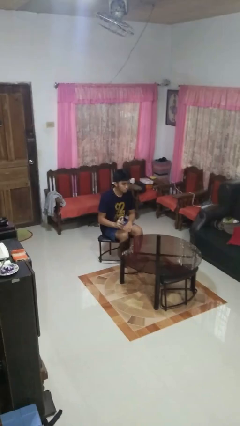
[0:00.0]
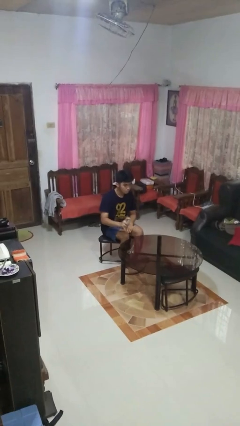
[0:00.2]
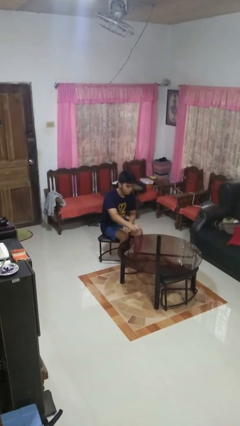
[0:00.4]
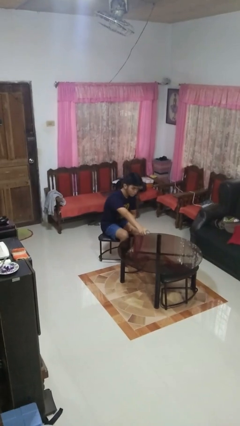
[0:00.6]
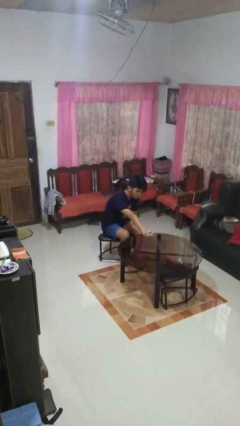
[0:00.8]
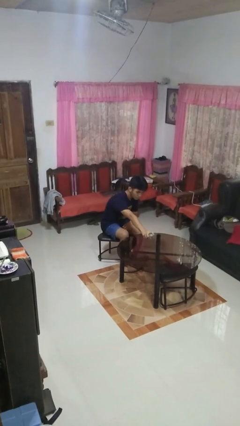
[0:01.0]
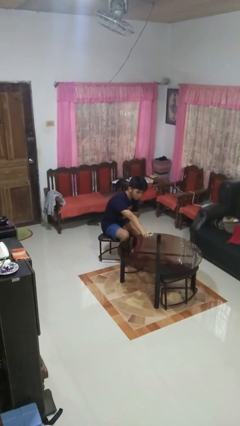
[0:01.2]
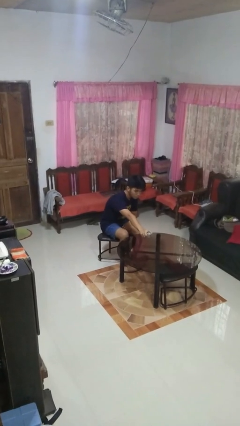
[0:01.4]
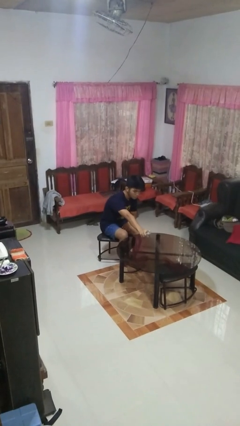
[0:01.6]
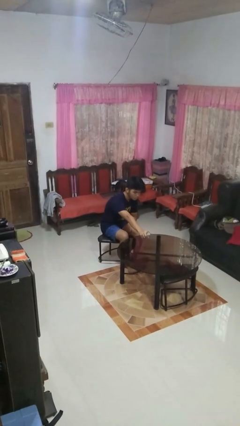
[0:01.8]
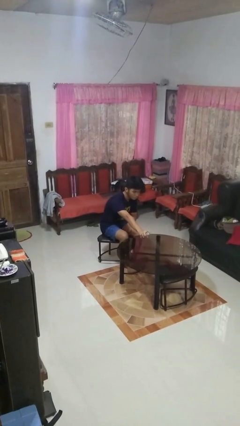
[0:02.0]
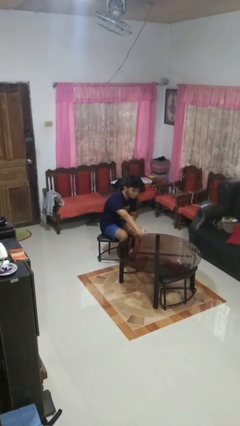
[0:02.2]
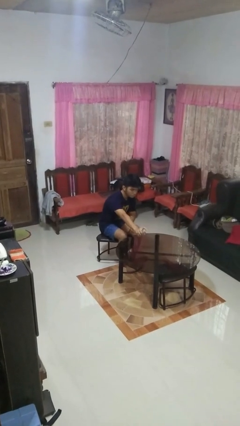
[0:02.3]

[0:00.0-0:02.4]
person sprays from bottle

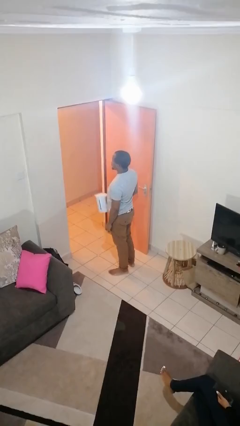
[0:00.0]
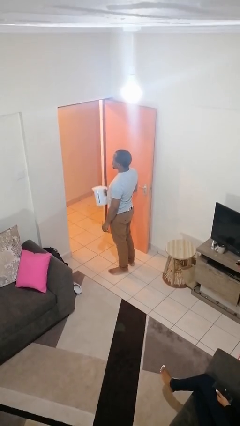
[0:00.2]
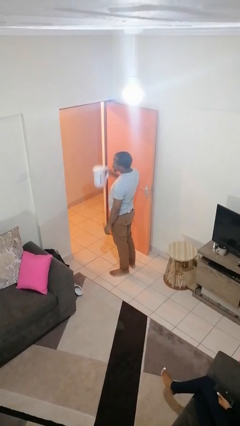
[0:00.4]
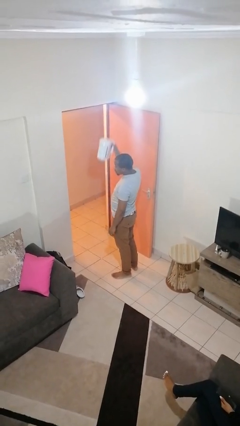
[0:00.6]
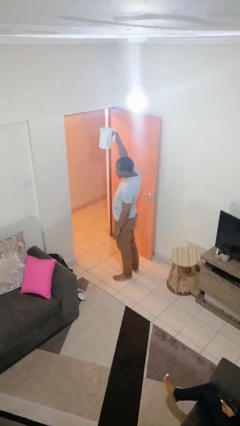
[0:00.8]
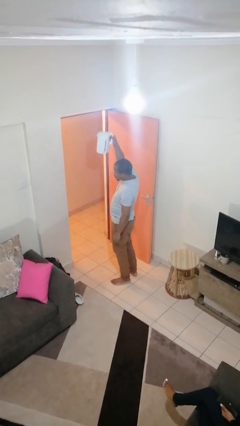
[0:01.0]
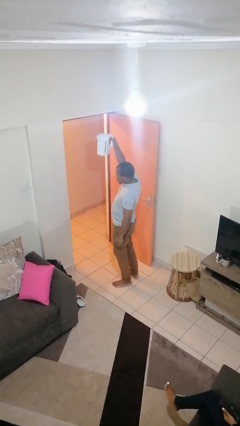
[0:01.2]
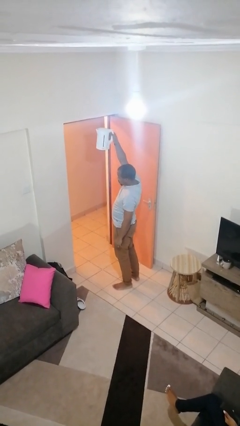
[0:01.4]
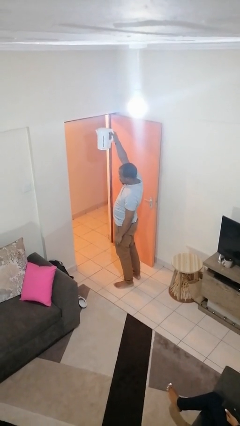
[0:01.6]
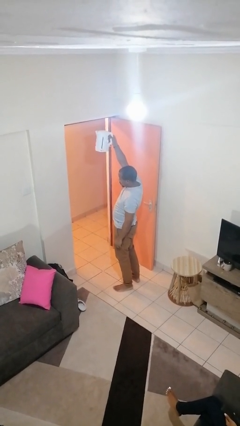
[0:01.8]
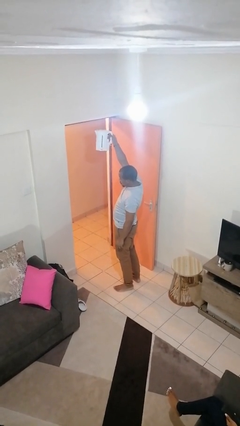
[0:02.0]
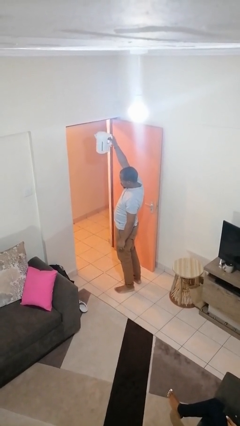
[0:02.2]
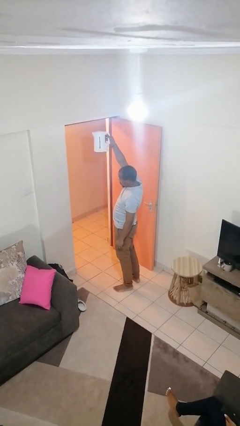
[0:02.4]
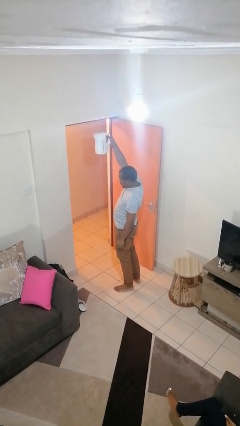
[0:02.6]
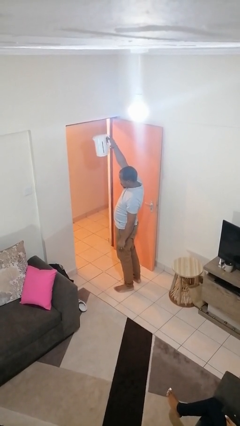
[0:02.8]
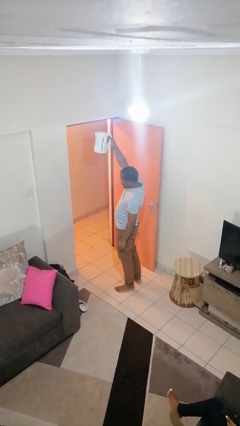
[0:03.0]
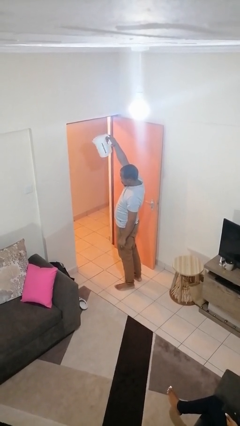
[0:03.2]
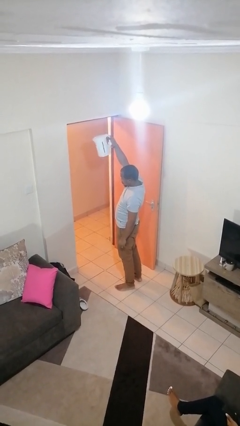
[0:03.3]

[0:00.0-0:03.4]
person holds object above head

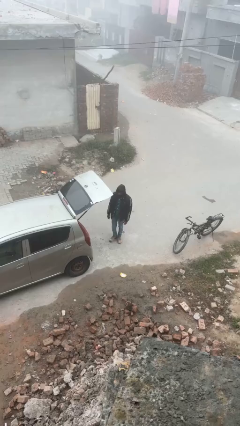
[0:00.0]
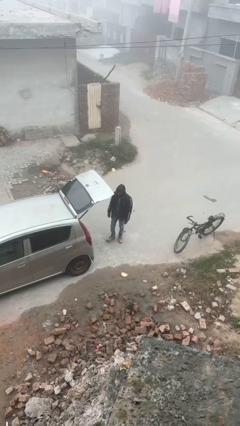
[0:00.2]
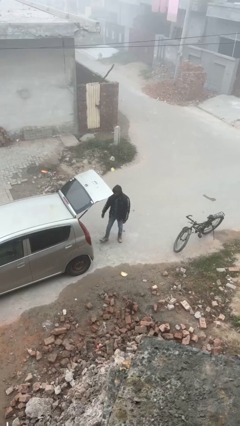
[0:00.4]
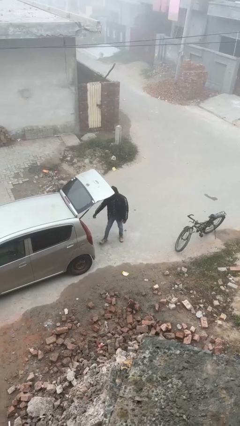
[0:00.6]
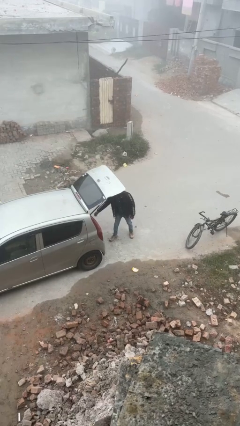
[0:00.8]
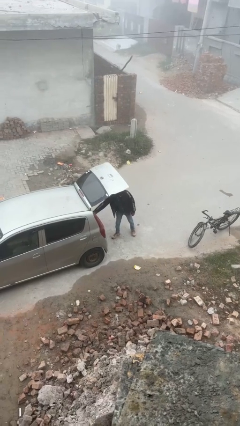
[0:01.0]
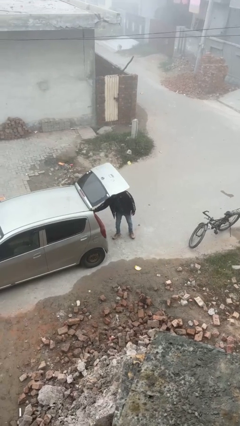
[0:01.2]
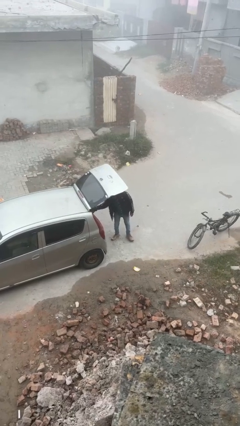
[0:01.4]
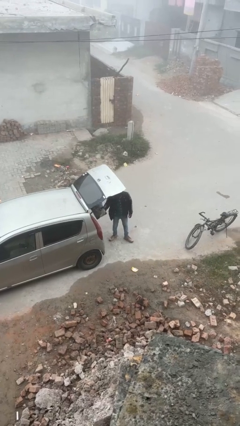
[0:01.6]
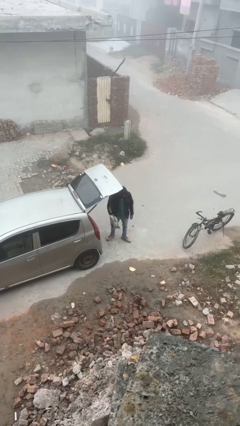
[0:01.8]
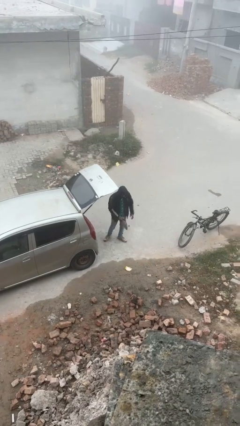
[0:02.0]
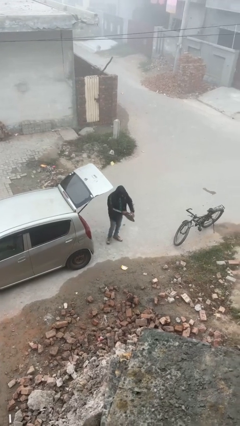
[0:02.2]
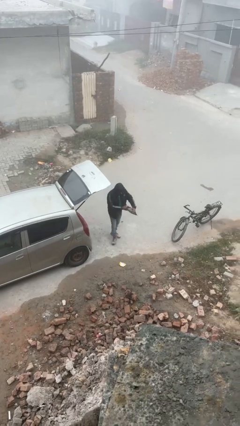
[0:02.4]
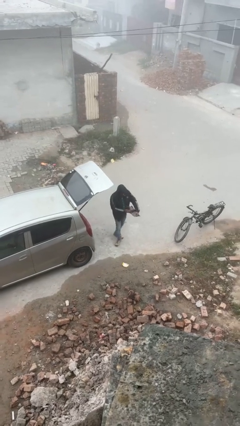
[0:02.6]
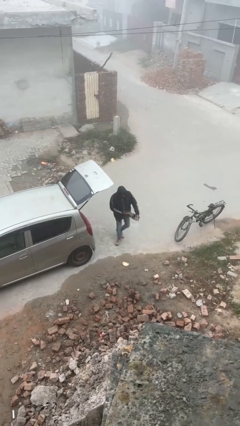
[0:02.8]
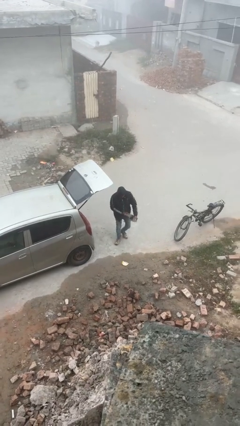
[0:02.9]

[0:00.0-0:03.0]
person unloads car

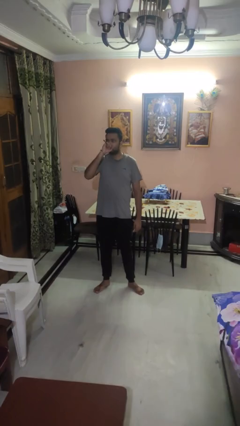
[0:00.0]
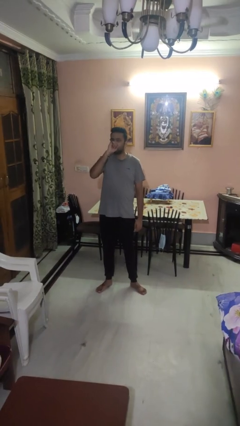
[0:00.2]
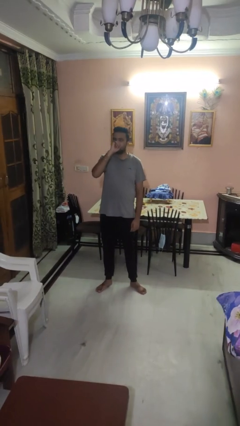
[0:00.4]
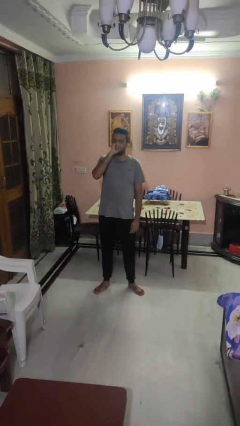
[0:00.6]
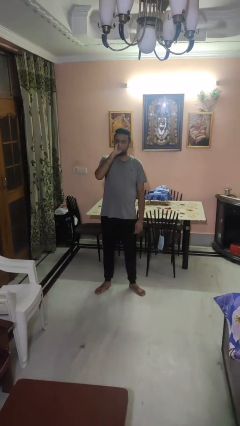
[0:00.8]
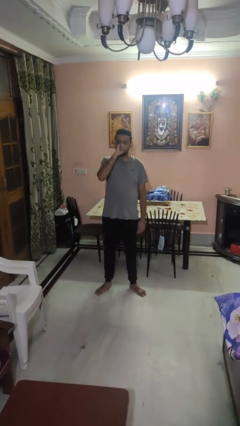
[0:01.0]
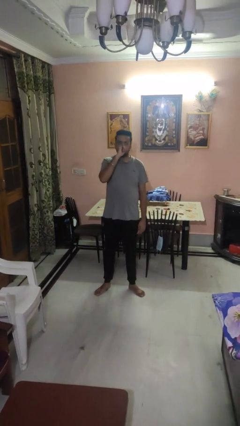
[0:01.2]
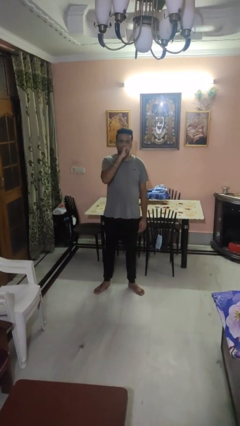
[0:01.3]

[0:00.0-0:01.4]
person vapes

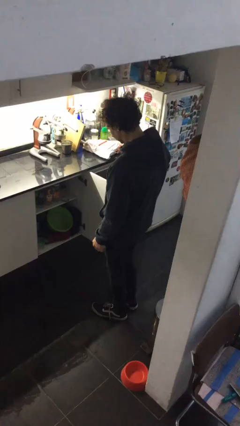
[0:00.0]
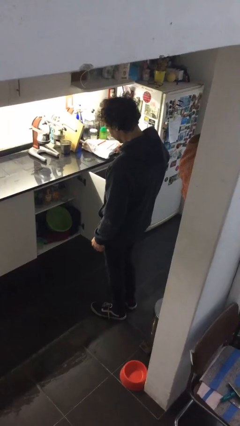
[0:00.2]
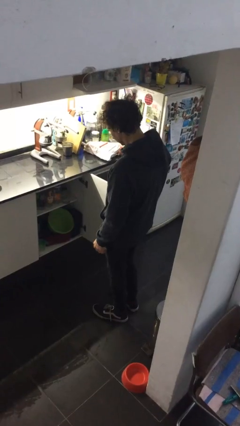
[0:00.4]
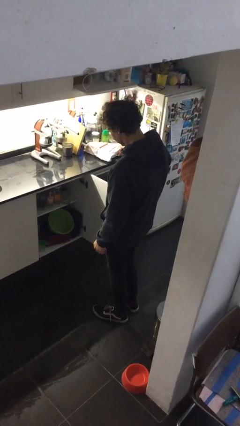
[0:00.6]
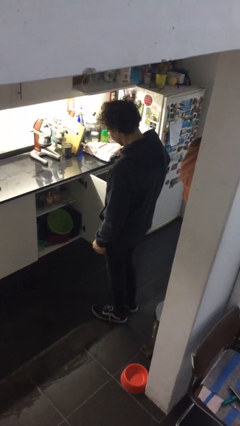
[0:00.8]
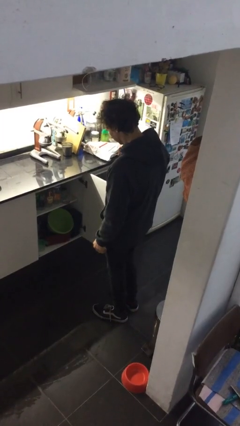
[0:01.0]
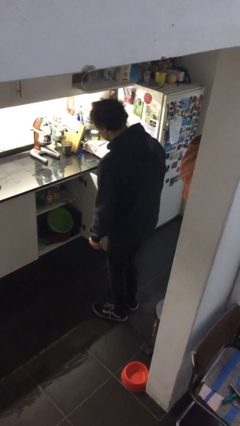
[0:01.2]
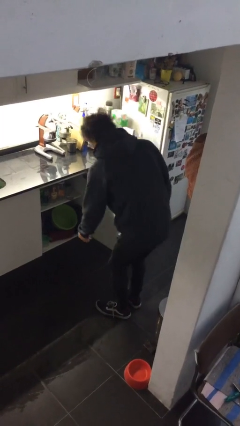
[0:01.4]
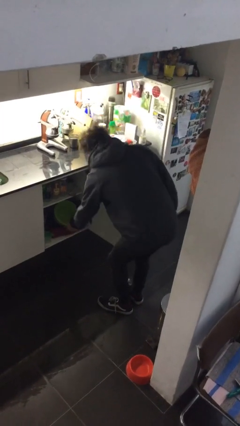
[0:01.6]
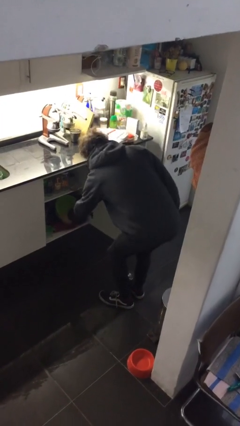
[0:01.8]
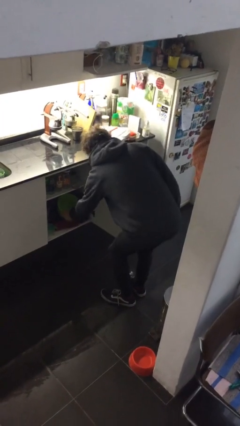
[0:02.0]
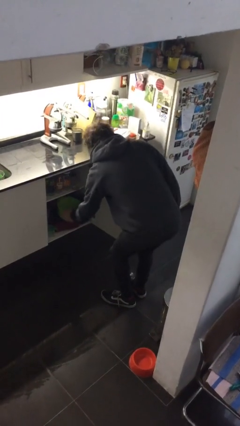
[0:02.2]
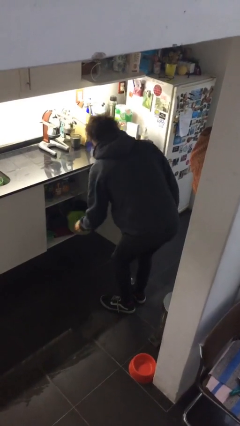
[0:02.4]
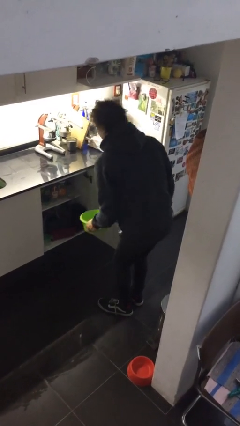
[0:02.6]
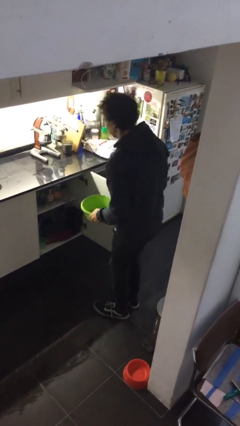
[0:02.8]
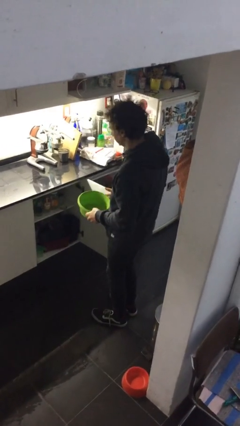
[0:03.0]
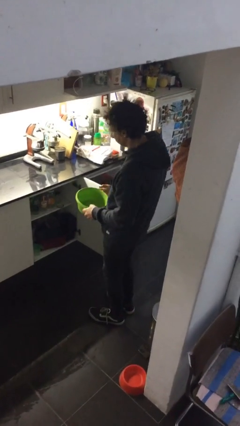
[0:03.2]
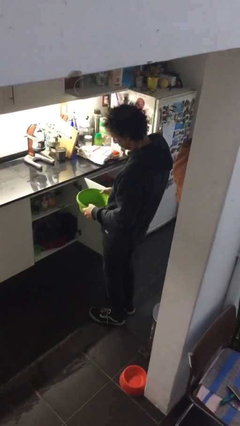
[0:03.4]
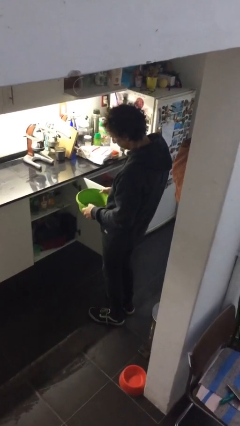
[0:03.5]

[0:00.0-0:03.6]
person picks up object from cabinet

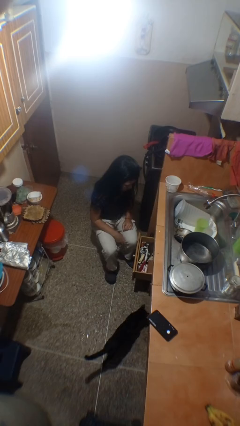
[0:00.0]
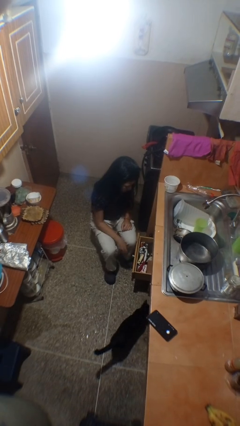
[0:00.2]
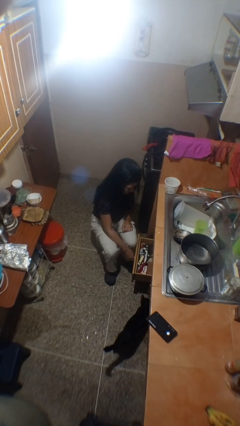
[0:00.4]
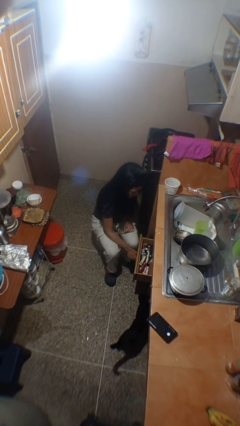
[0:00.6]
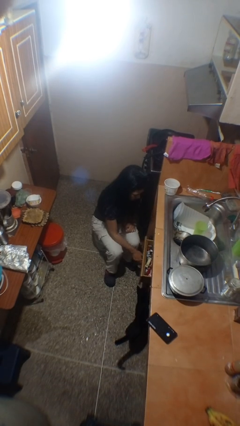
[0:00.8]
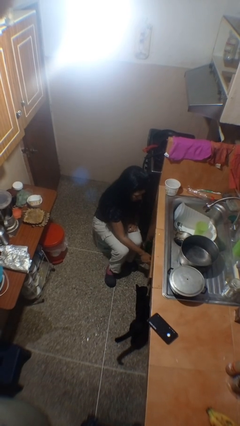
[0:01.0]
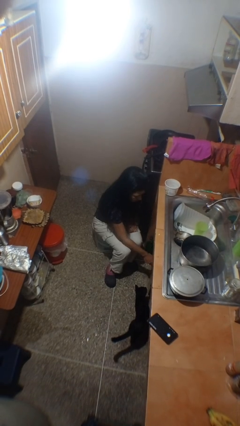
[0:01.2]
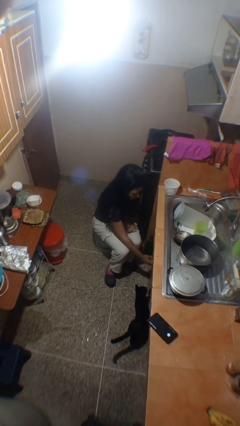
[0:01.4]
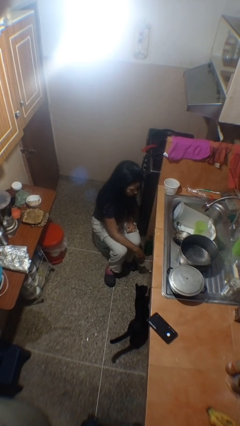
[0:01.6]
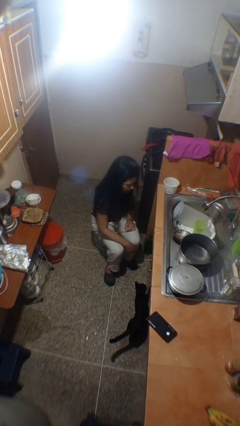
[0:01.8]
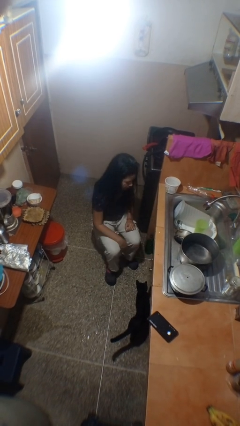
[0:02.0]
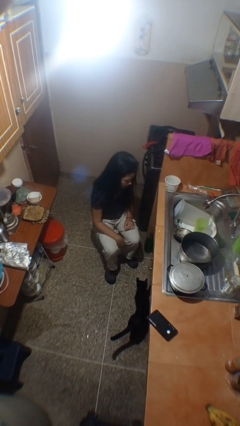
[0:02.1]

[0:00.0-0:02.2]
person closes kitchen drawer

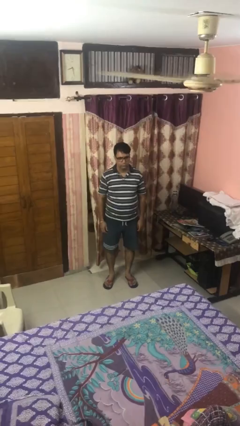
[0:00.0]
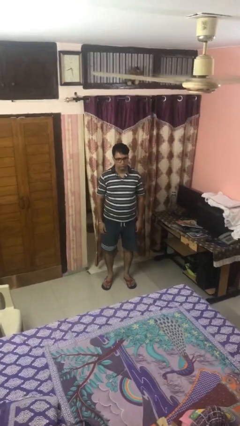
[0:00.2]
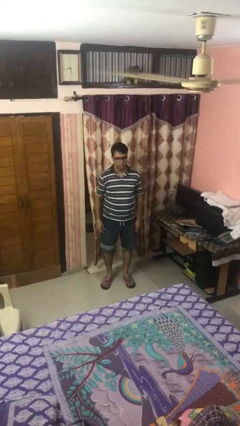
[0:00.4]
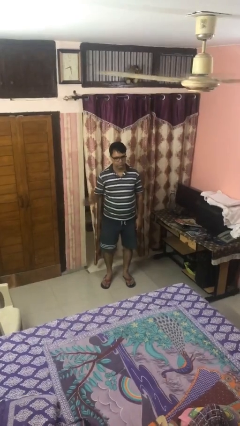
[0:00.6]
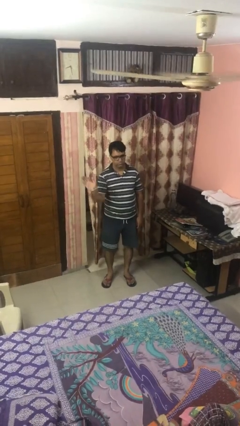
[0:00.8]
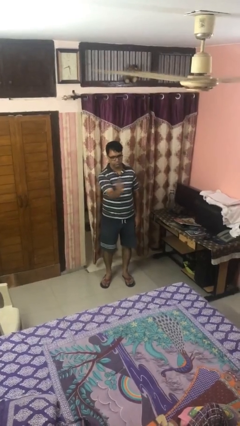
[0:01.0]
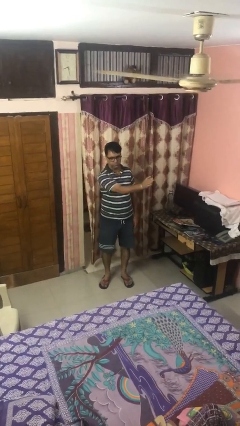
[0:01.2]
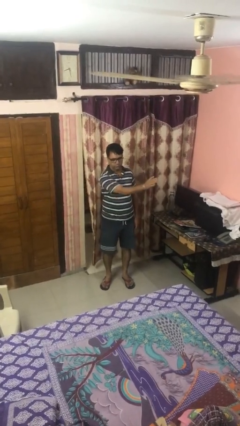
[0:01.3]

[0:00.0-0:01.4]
person gestures swipe left
